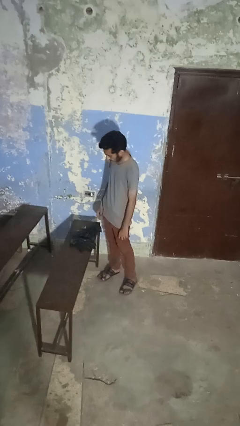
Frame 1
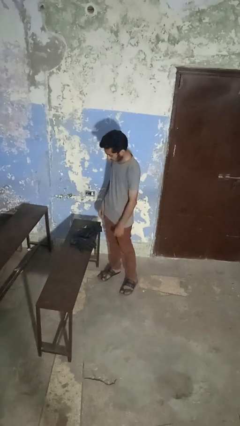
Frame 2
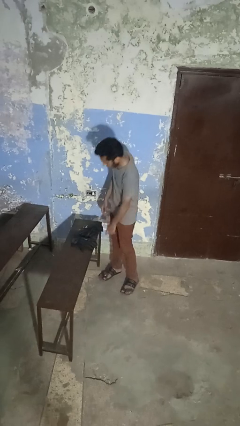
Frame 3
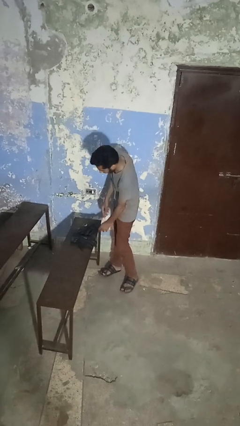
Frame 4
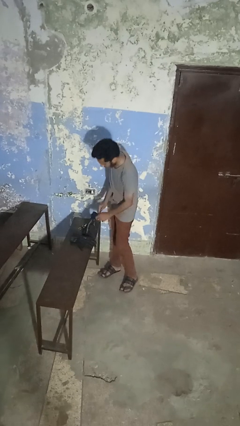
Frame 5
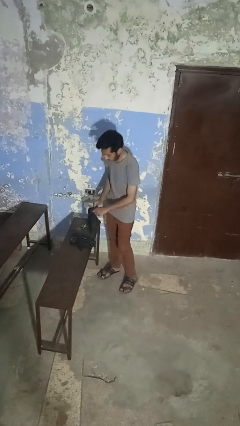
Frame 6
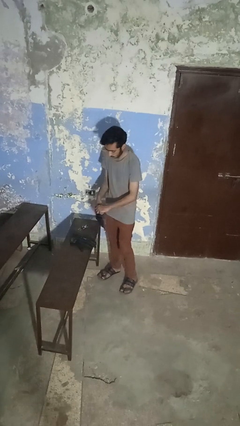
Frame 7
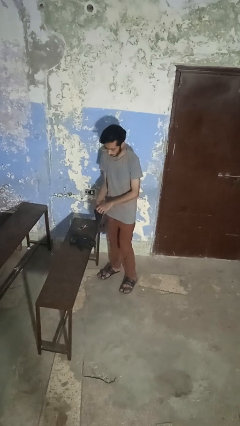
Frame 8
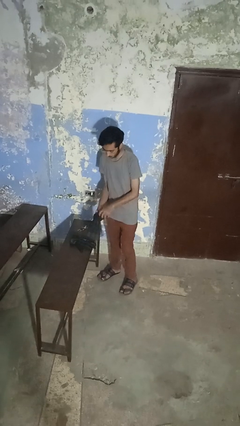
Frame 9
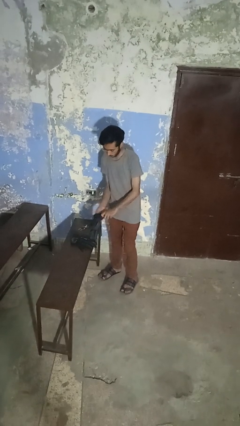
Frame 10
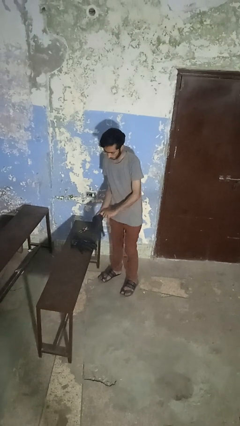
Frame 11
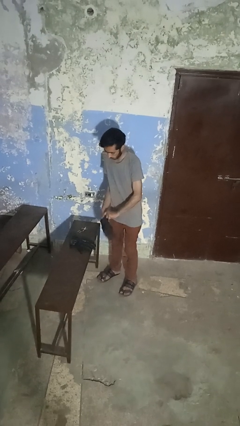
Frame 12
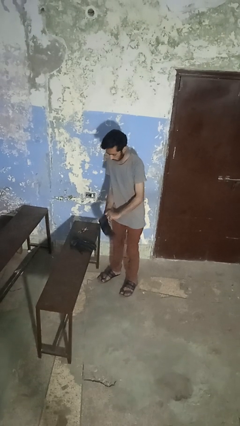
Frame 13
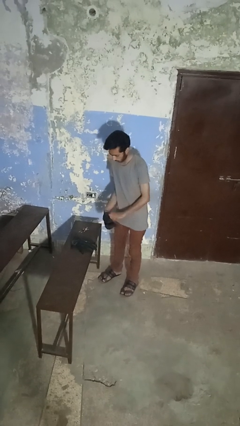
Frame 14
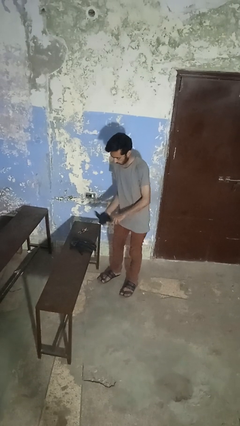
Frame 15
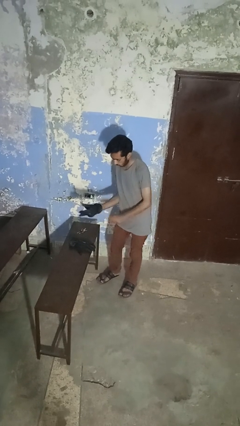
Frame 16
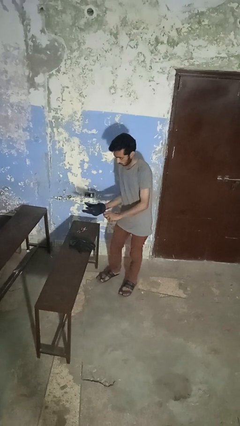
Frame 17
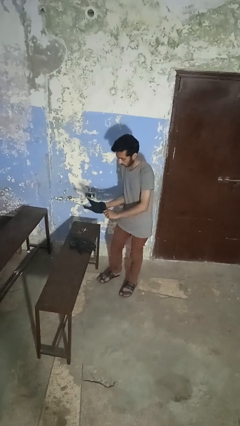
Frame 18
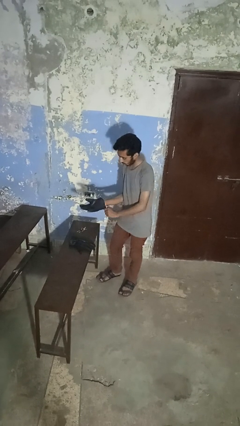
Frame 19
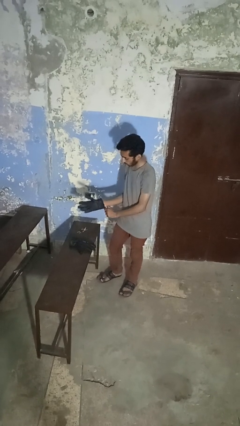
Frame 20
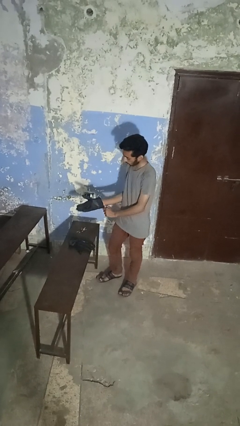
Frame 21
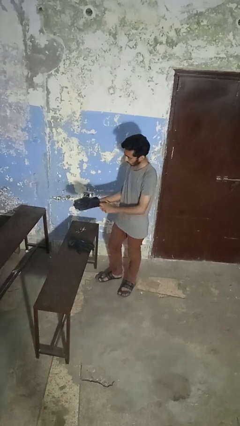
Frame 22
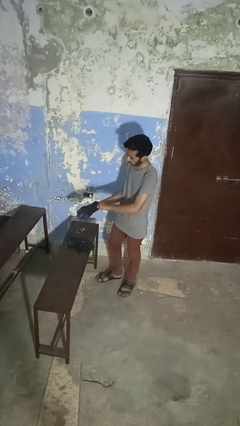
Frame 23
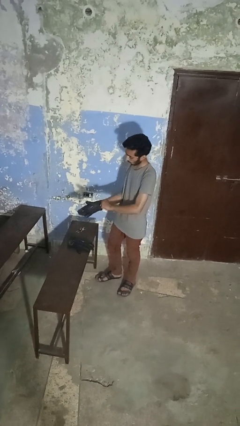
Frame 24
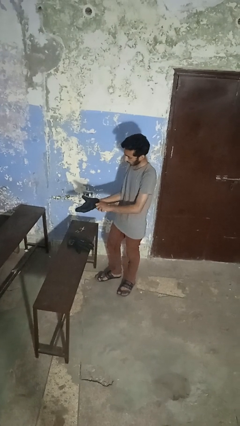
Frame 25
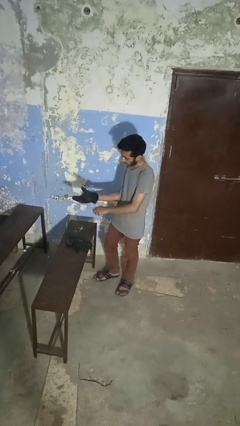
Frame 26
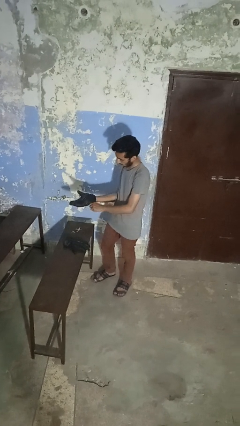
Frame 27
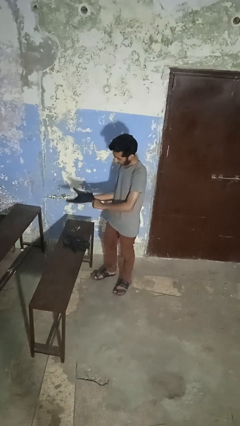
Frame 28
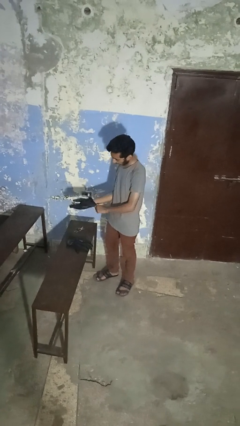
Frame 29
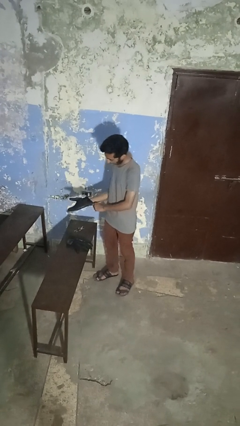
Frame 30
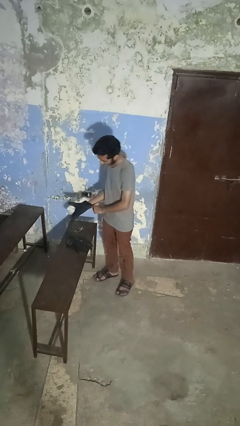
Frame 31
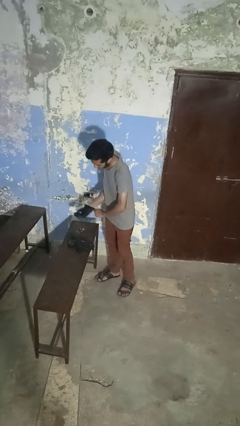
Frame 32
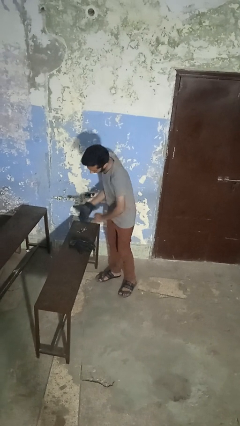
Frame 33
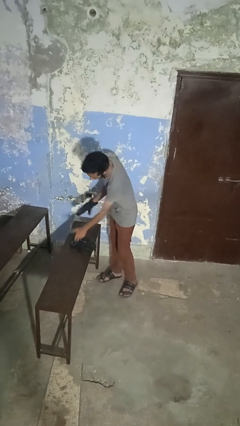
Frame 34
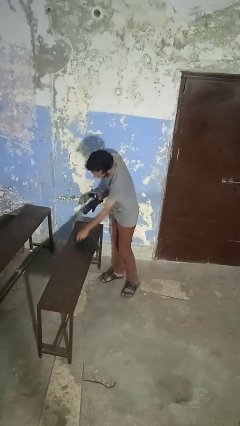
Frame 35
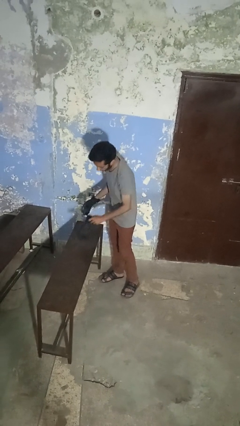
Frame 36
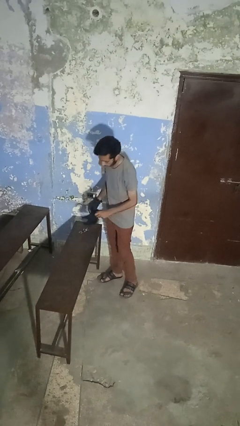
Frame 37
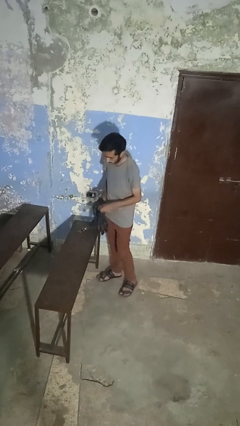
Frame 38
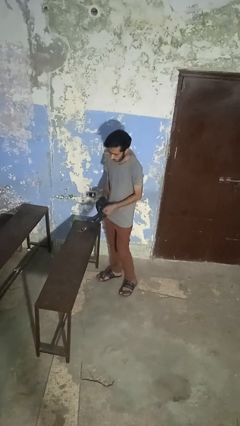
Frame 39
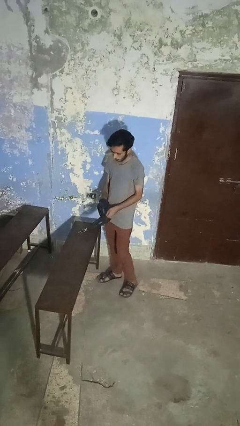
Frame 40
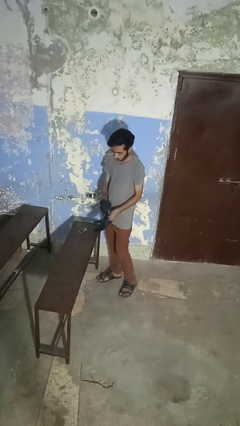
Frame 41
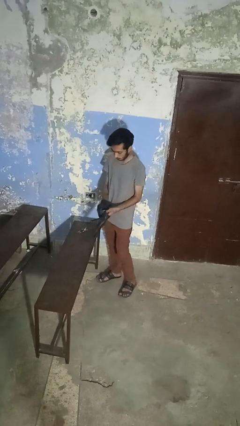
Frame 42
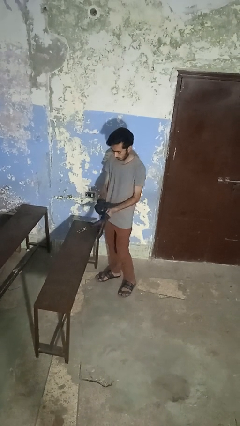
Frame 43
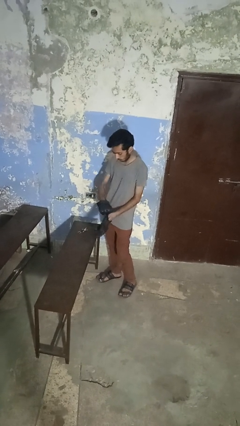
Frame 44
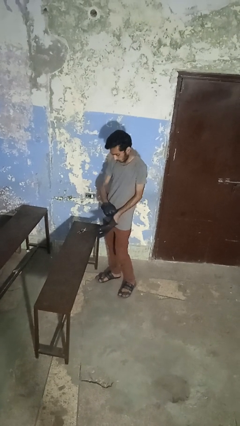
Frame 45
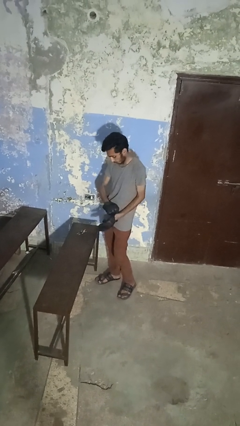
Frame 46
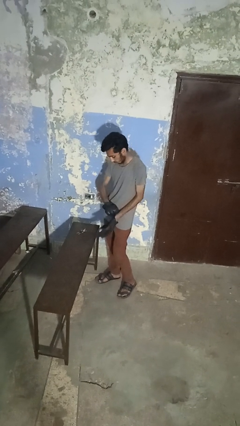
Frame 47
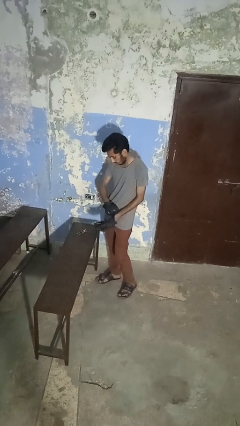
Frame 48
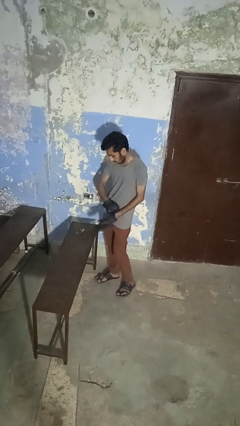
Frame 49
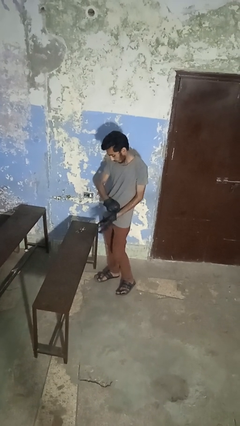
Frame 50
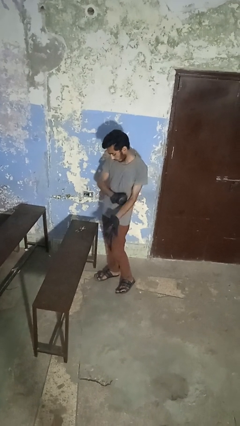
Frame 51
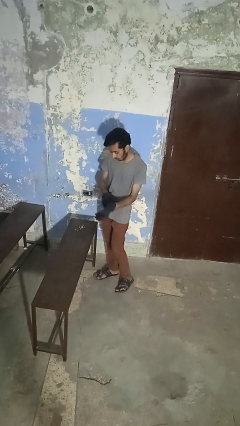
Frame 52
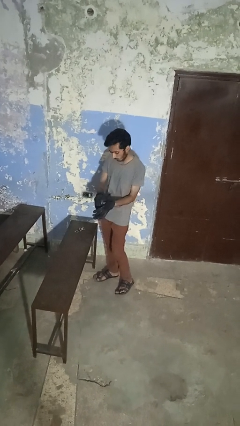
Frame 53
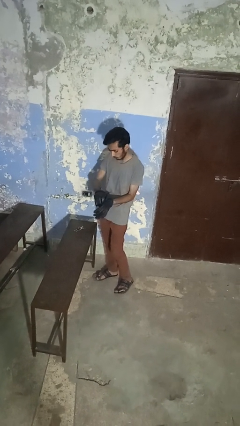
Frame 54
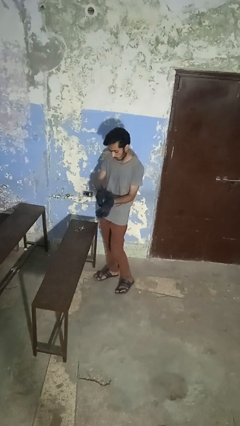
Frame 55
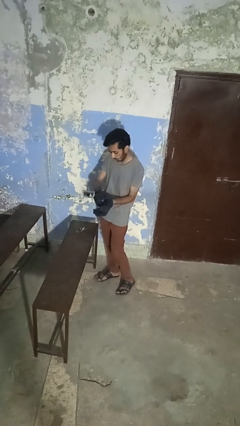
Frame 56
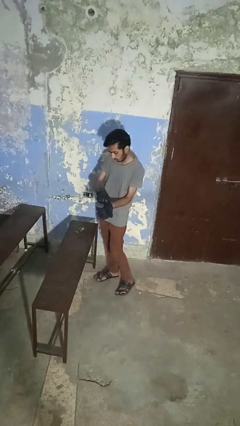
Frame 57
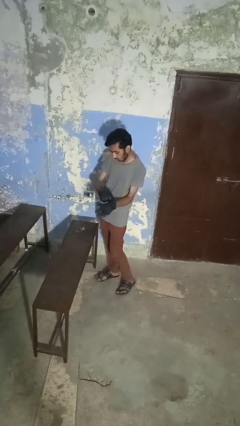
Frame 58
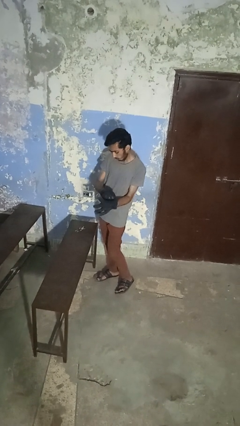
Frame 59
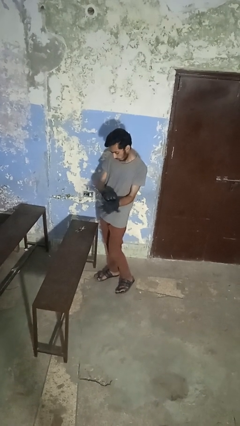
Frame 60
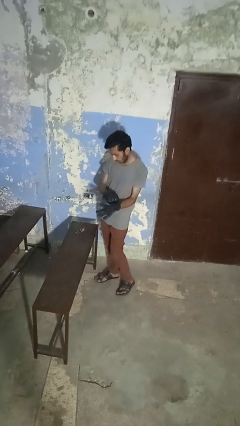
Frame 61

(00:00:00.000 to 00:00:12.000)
person puts on gloves

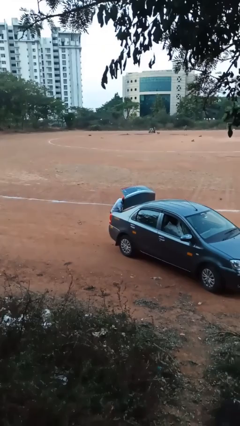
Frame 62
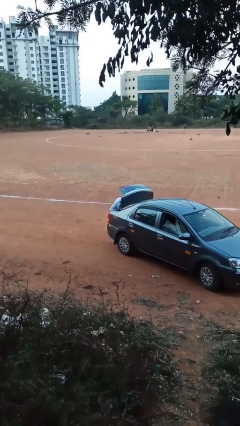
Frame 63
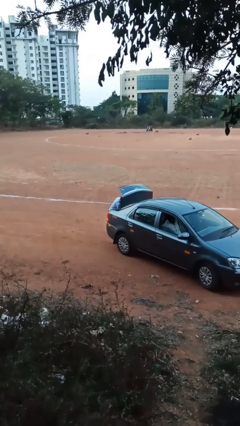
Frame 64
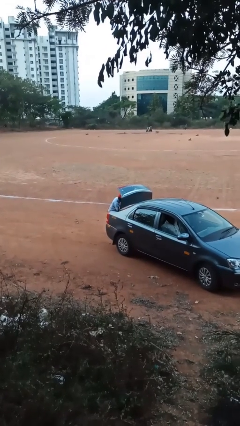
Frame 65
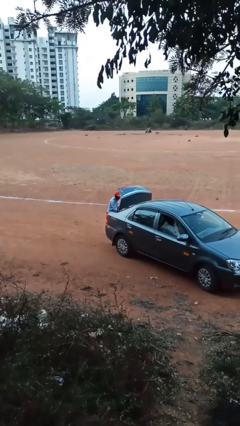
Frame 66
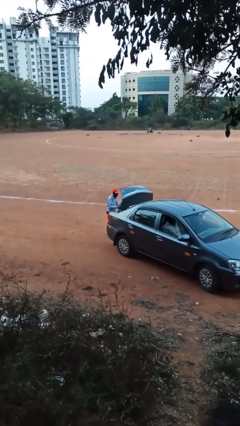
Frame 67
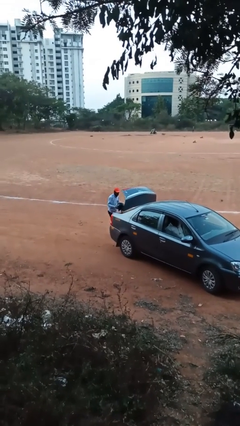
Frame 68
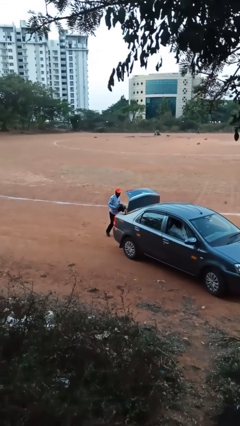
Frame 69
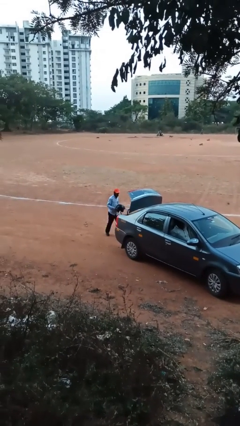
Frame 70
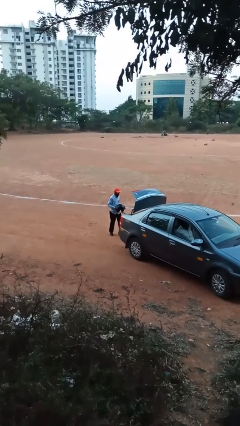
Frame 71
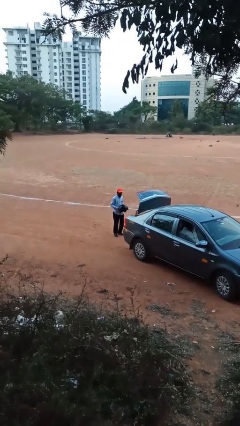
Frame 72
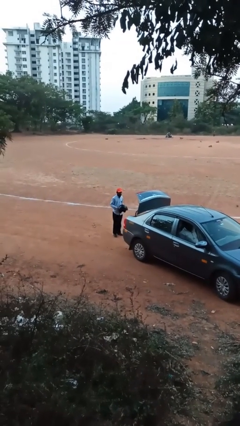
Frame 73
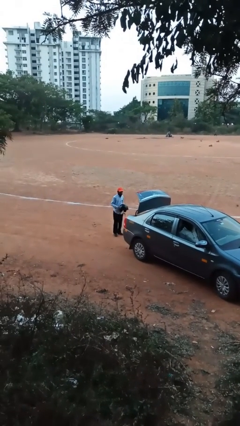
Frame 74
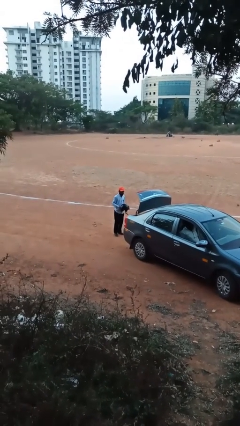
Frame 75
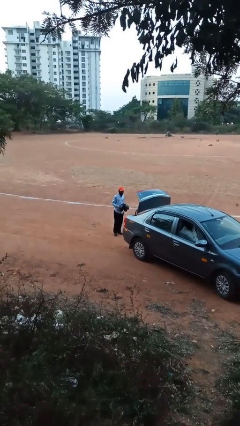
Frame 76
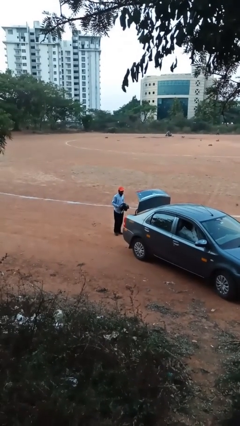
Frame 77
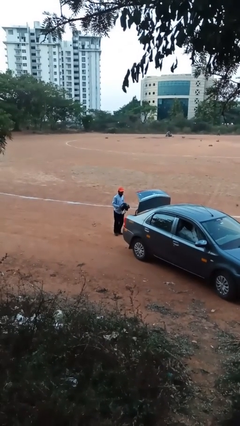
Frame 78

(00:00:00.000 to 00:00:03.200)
person unloads car

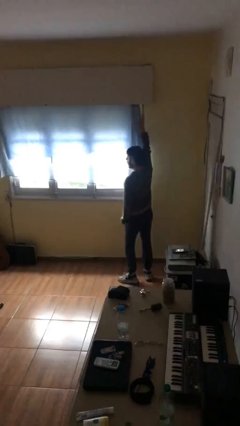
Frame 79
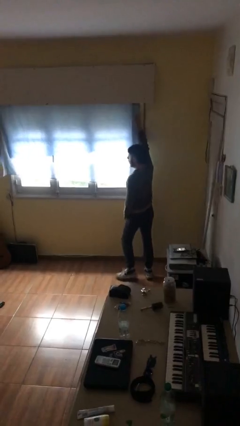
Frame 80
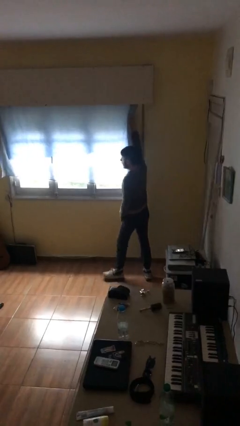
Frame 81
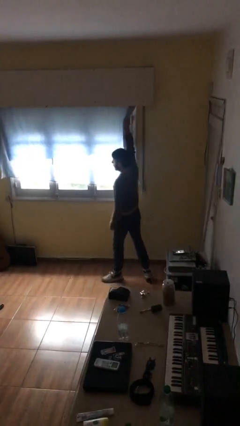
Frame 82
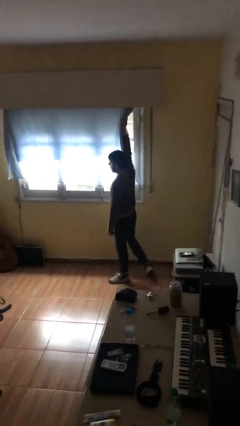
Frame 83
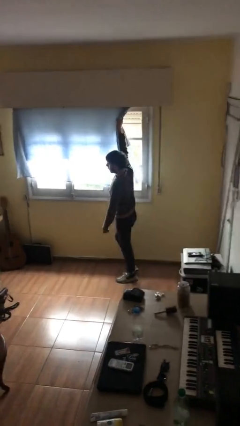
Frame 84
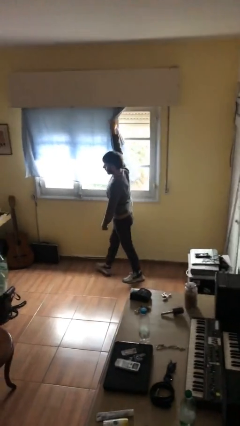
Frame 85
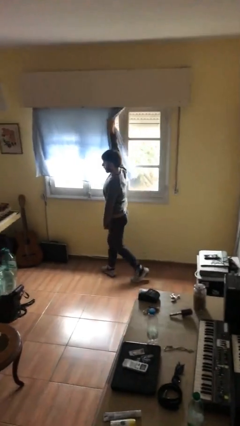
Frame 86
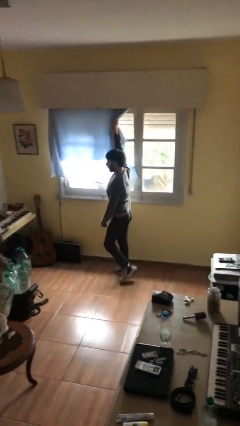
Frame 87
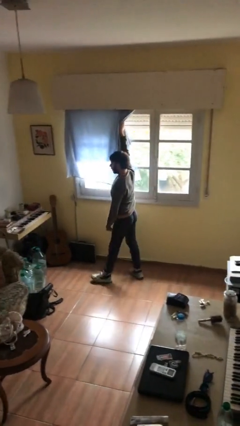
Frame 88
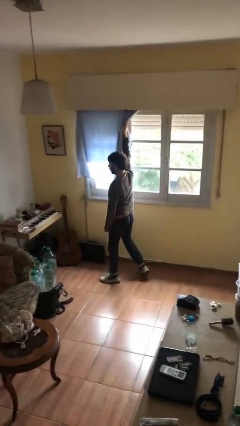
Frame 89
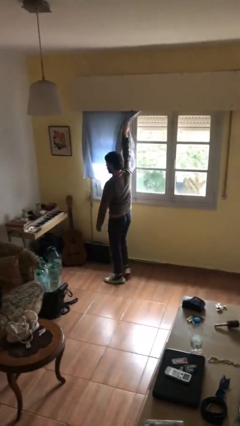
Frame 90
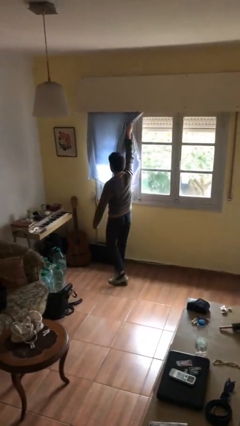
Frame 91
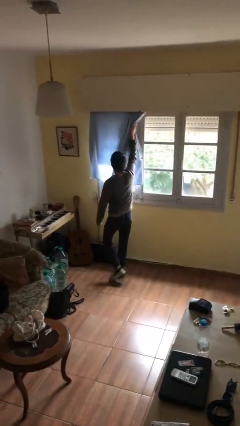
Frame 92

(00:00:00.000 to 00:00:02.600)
person opens curtains
